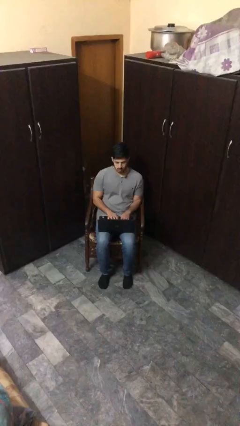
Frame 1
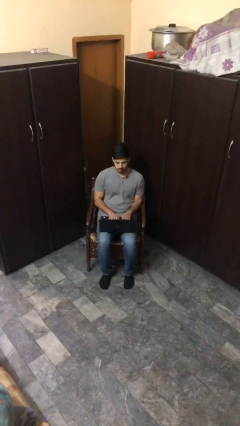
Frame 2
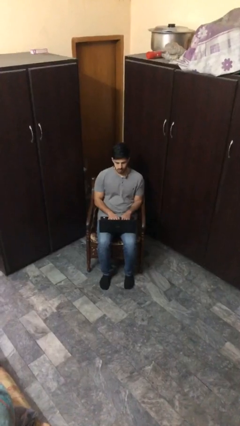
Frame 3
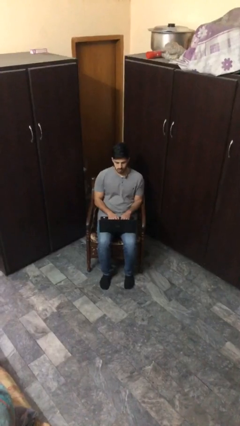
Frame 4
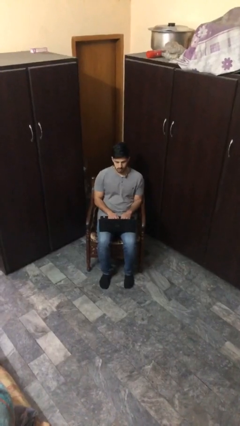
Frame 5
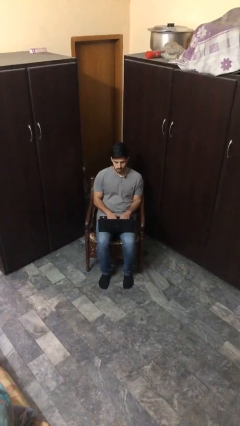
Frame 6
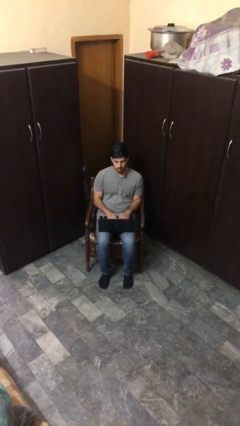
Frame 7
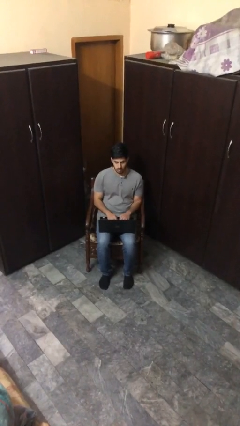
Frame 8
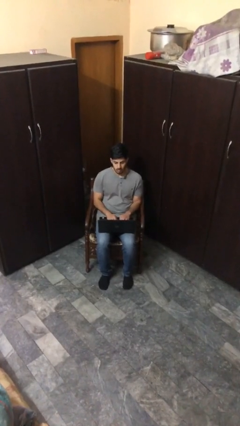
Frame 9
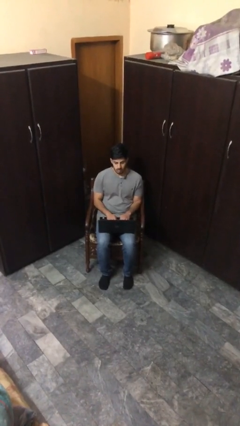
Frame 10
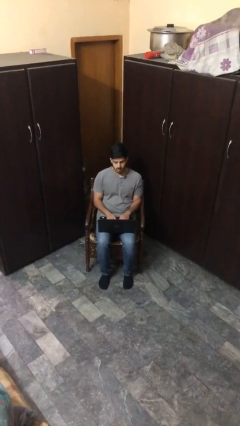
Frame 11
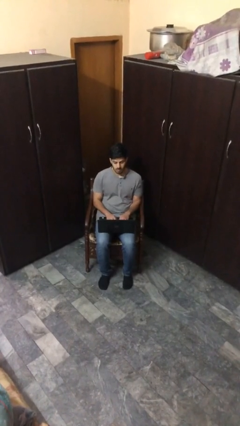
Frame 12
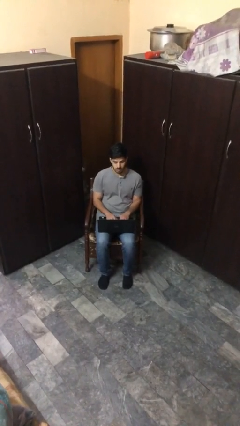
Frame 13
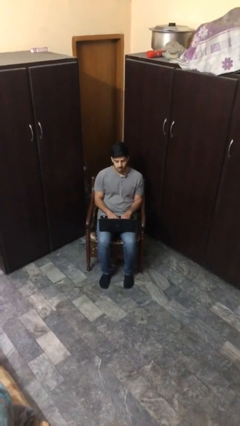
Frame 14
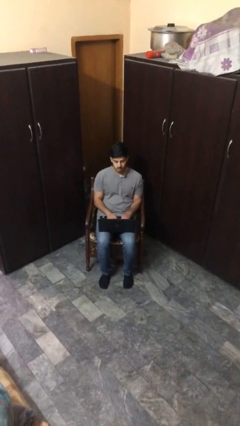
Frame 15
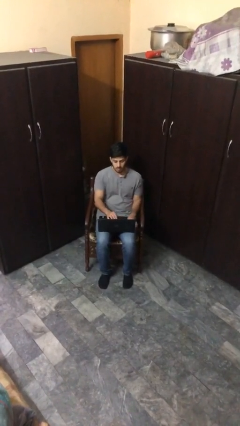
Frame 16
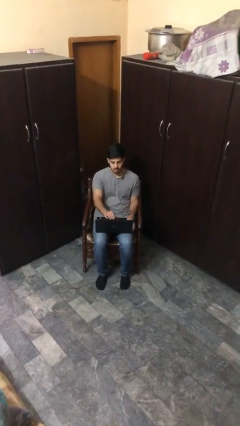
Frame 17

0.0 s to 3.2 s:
person interacts with laptop

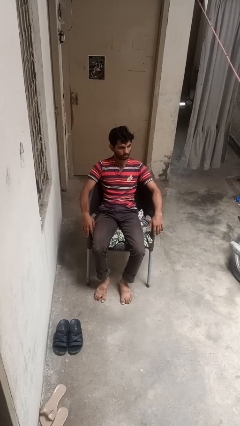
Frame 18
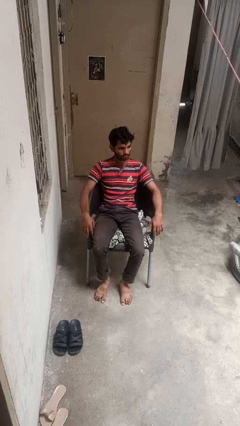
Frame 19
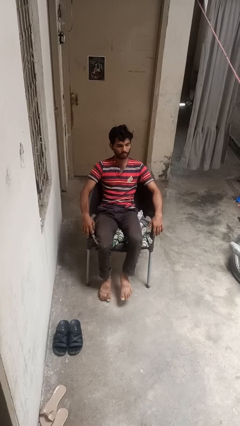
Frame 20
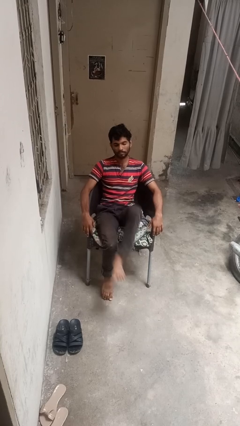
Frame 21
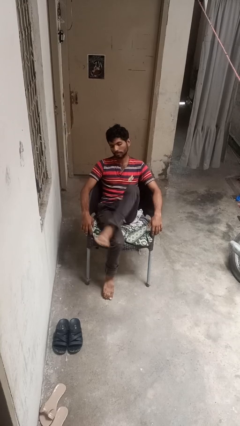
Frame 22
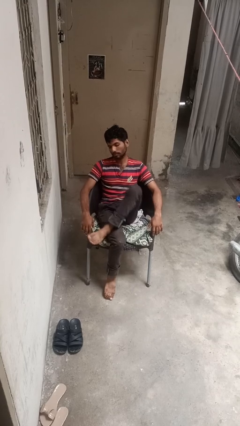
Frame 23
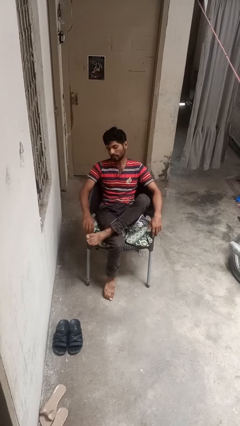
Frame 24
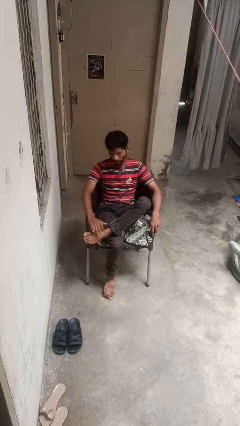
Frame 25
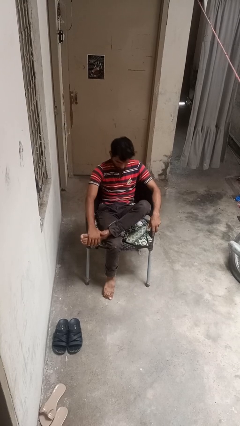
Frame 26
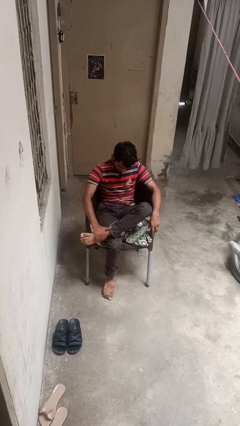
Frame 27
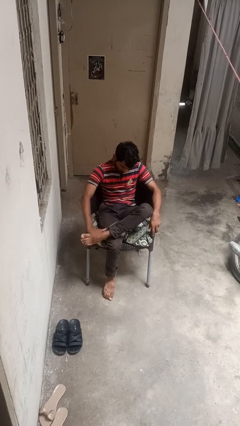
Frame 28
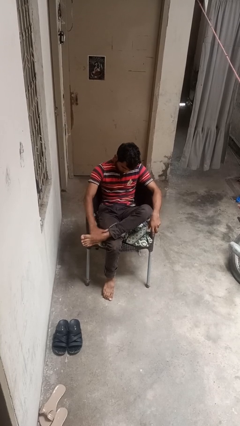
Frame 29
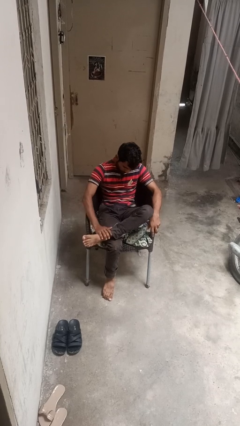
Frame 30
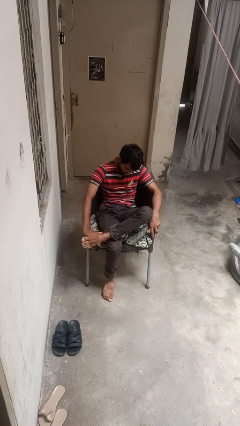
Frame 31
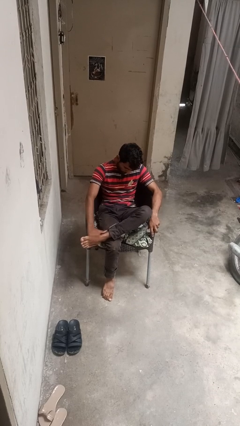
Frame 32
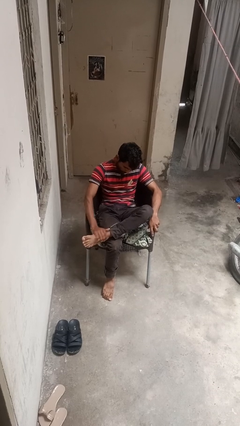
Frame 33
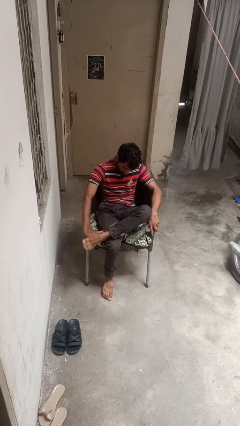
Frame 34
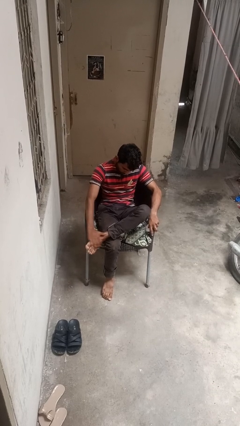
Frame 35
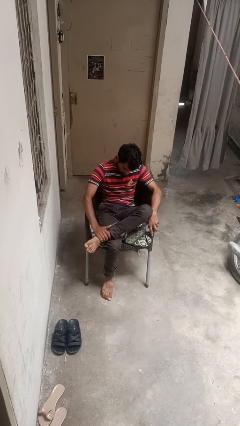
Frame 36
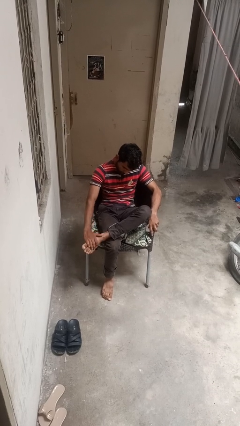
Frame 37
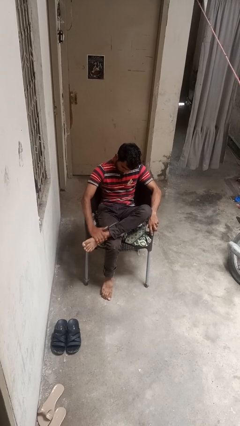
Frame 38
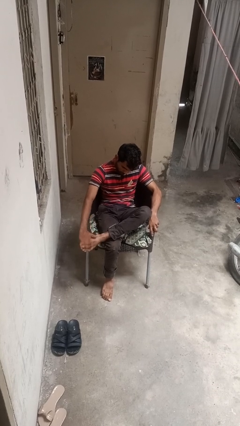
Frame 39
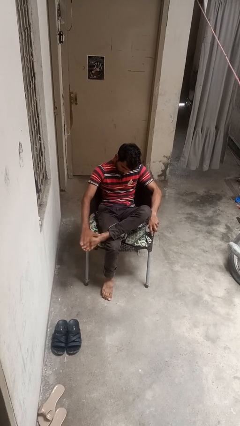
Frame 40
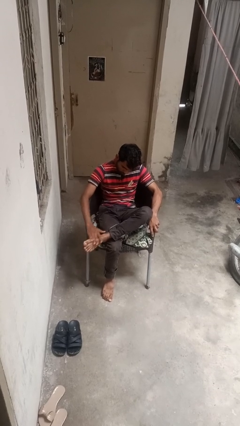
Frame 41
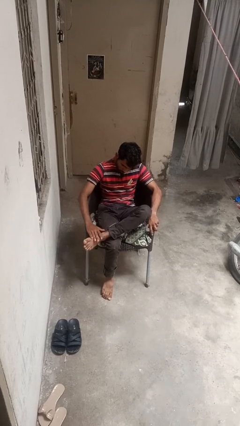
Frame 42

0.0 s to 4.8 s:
person rubs foot

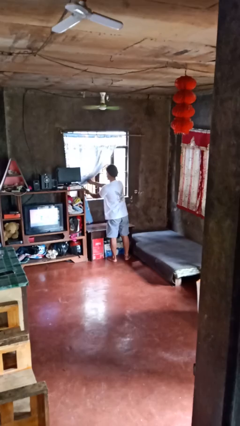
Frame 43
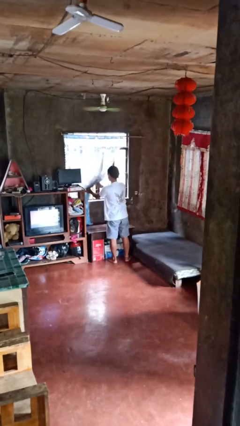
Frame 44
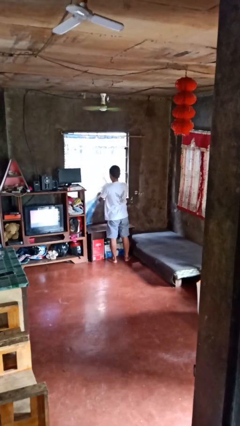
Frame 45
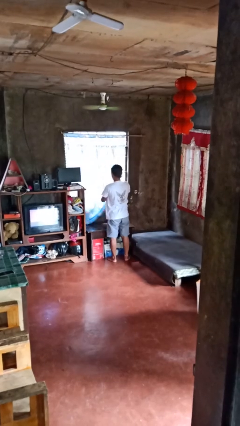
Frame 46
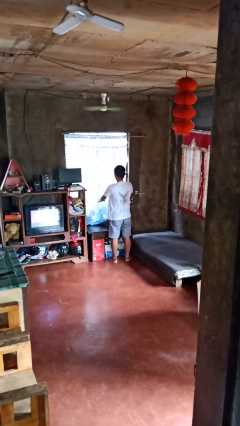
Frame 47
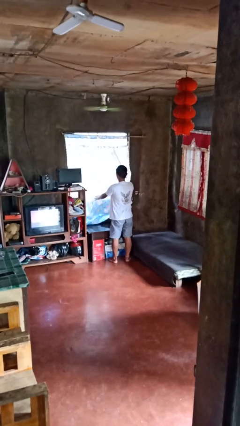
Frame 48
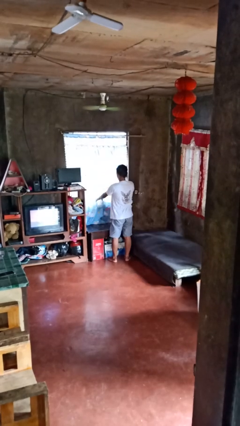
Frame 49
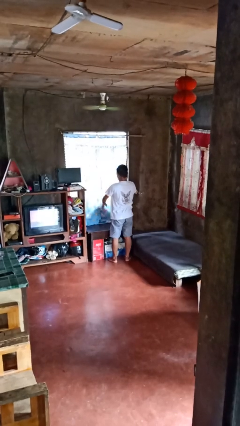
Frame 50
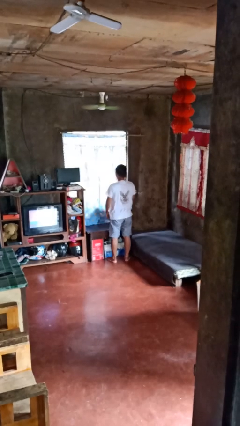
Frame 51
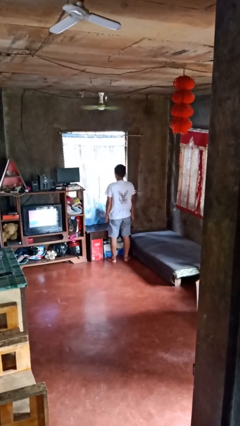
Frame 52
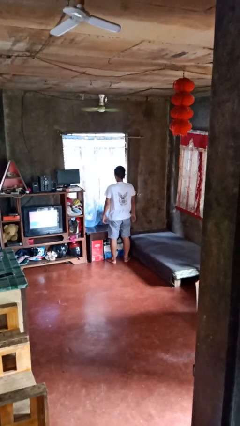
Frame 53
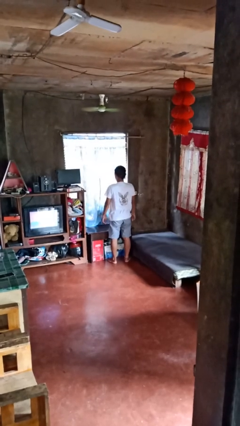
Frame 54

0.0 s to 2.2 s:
person closes curtains

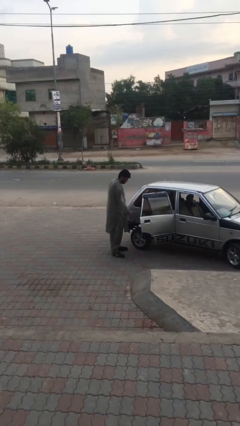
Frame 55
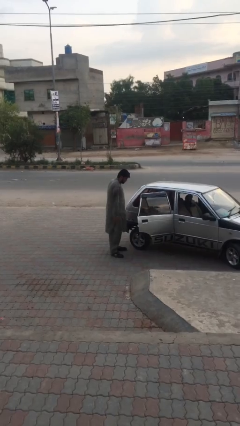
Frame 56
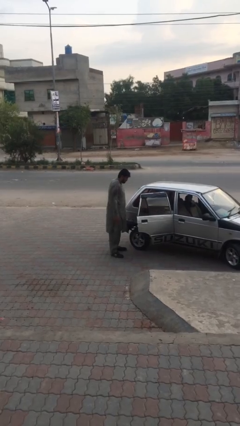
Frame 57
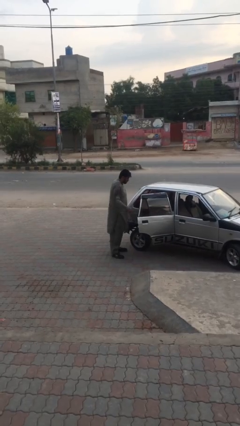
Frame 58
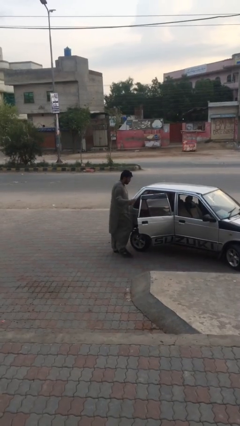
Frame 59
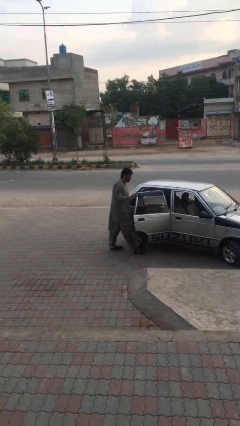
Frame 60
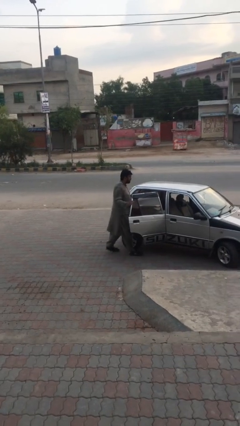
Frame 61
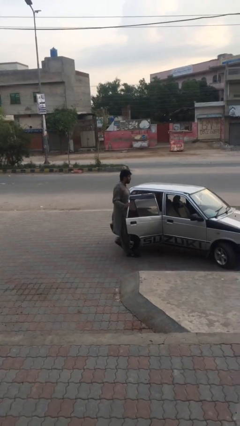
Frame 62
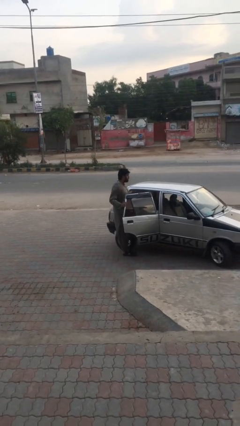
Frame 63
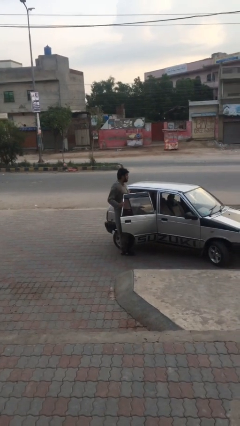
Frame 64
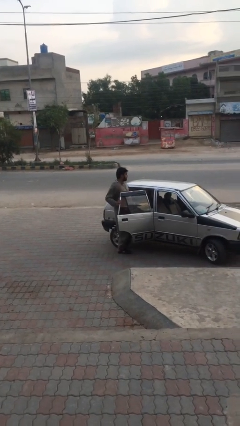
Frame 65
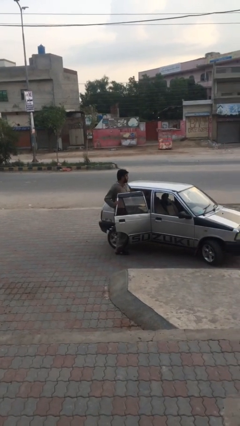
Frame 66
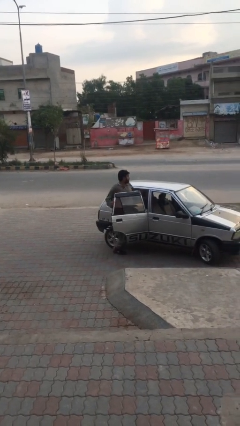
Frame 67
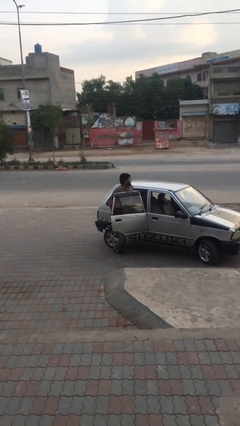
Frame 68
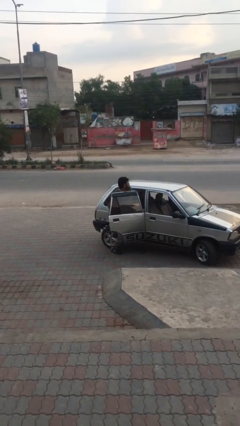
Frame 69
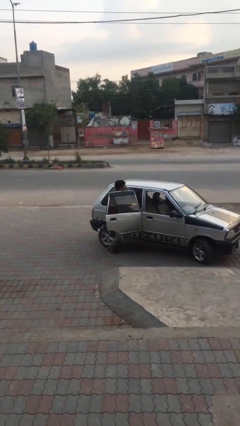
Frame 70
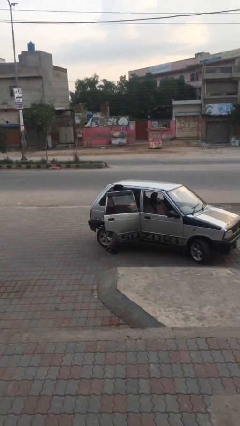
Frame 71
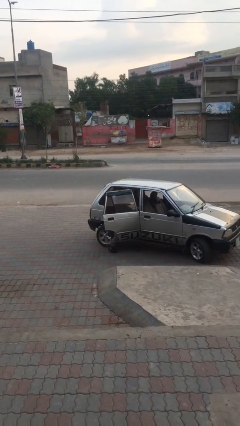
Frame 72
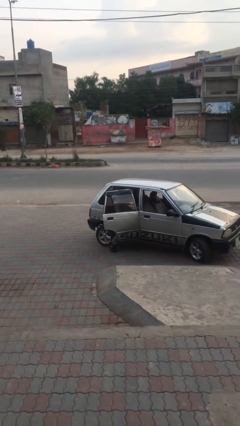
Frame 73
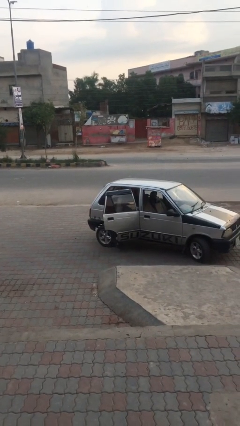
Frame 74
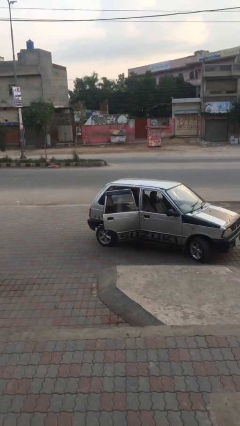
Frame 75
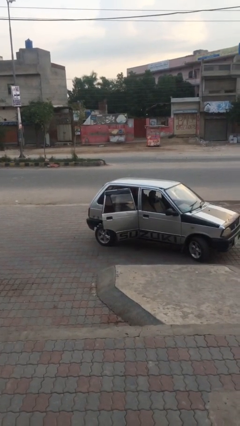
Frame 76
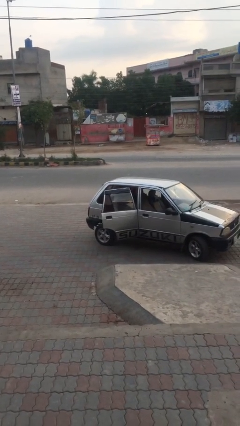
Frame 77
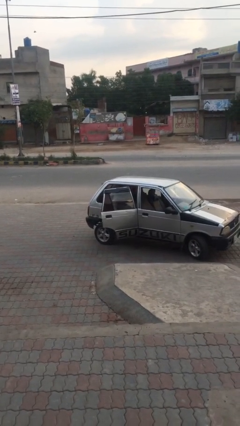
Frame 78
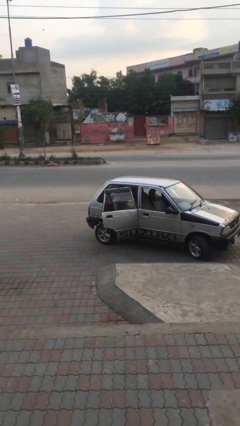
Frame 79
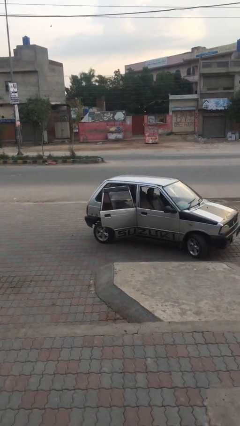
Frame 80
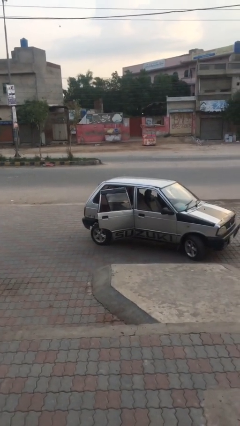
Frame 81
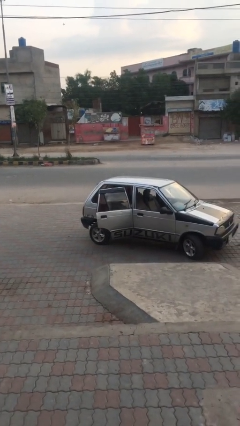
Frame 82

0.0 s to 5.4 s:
person enters car

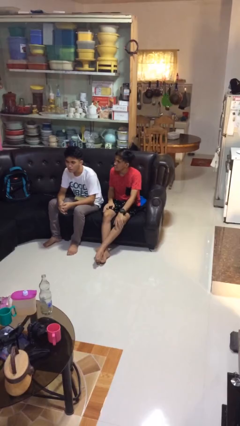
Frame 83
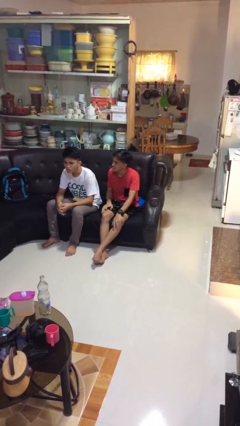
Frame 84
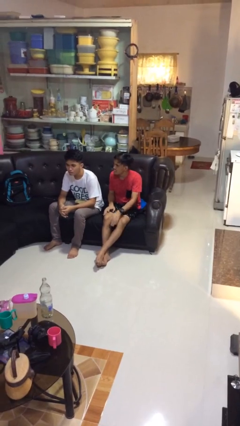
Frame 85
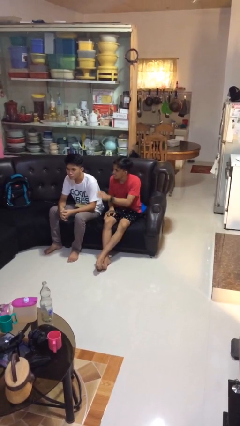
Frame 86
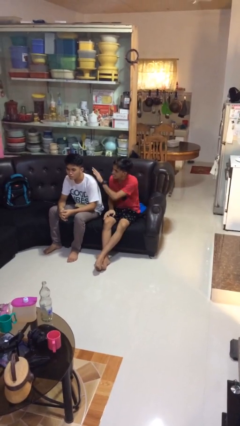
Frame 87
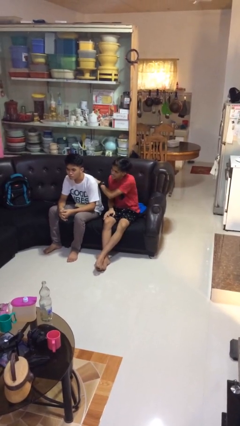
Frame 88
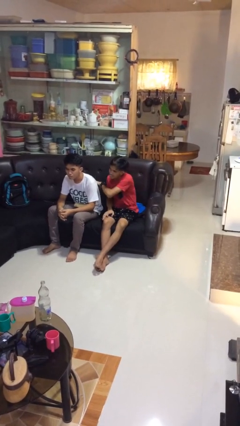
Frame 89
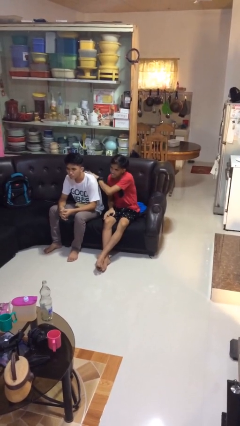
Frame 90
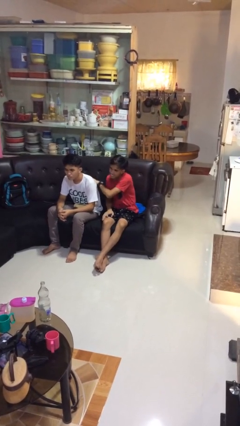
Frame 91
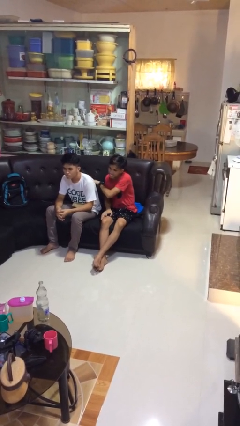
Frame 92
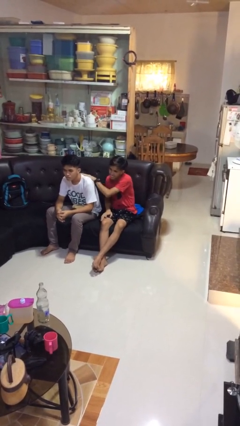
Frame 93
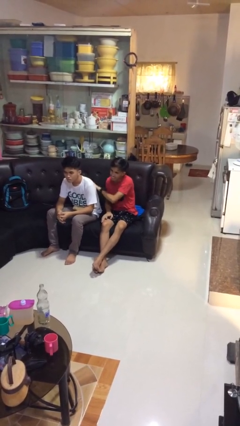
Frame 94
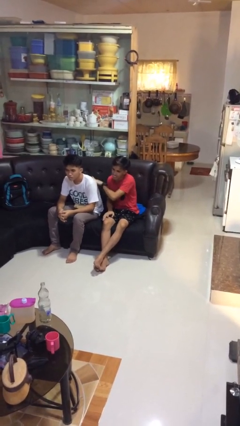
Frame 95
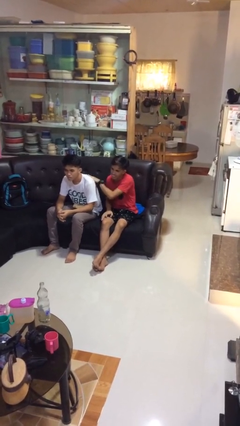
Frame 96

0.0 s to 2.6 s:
person touches back of person
